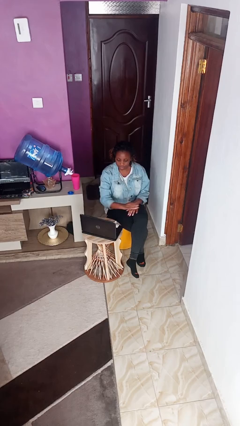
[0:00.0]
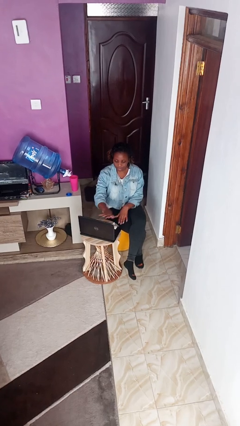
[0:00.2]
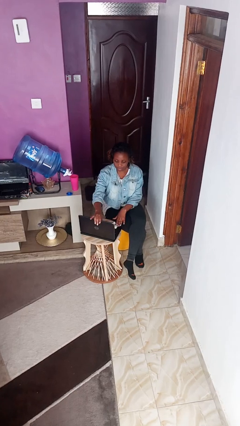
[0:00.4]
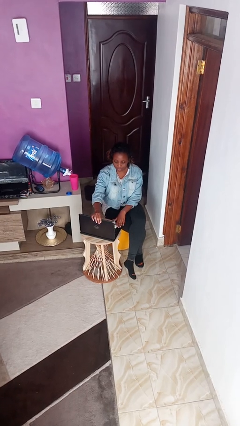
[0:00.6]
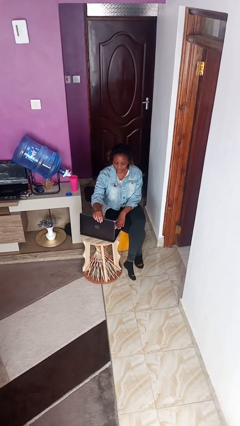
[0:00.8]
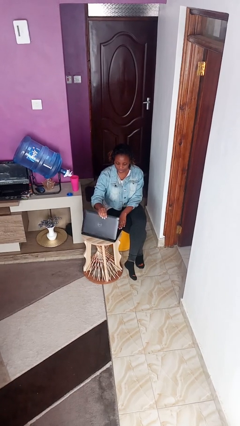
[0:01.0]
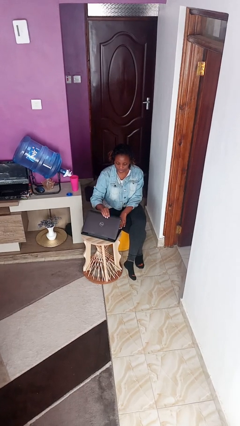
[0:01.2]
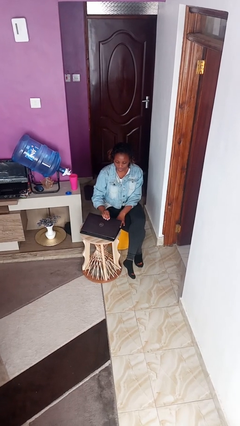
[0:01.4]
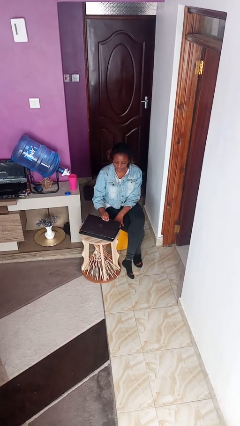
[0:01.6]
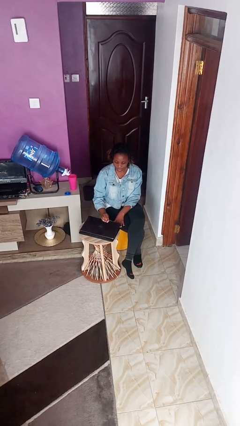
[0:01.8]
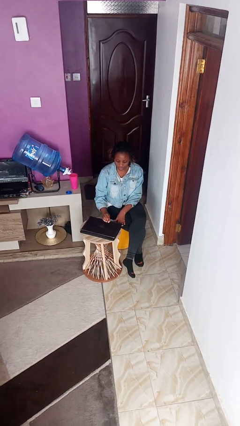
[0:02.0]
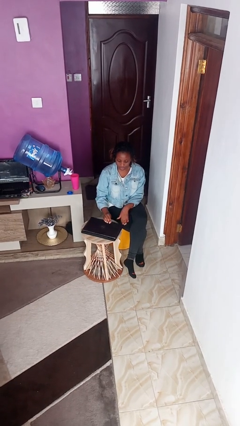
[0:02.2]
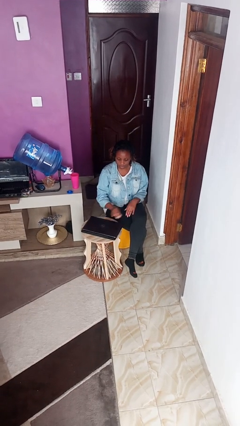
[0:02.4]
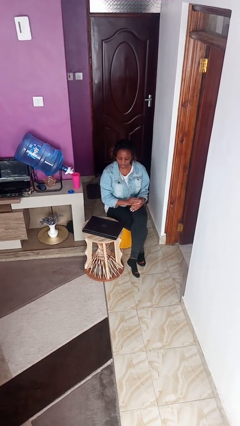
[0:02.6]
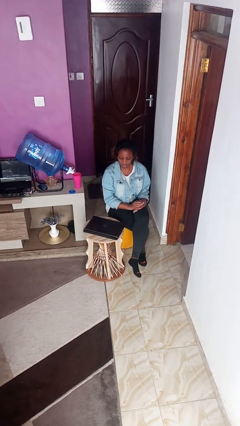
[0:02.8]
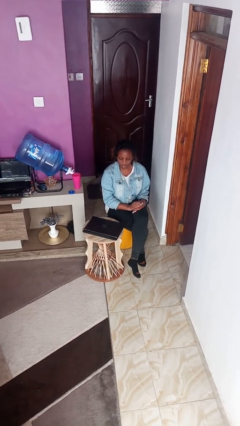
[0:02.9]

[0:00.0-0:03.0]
person closes laptop

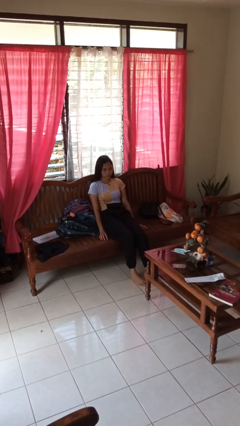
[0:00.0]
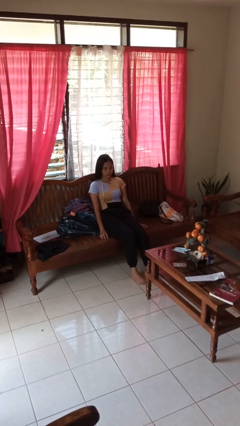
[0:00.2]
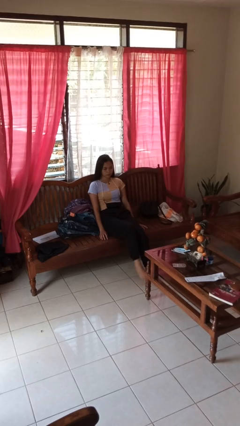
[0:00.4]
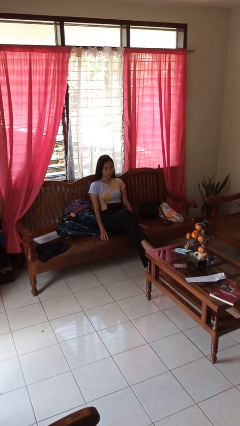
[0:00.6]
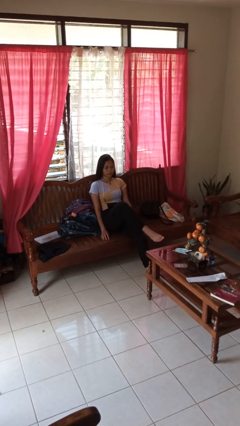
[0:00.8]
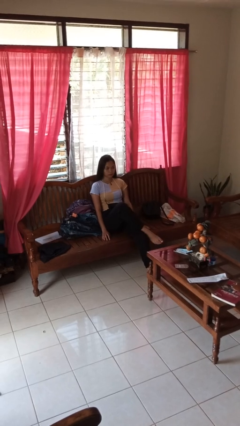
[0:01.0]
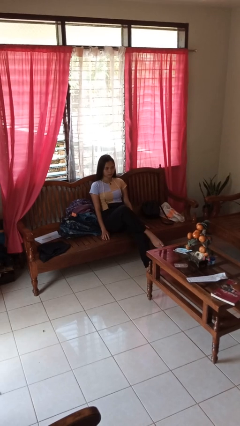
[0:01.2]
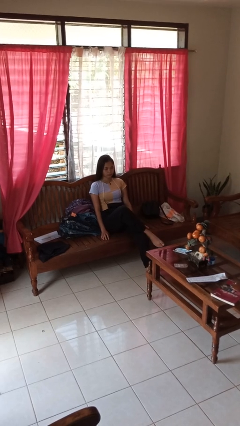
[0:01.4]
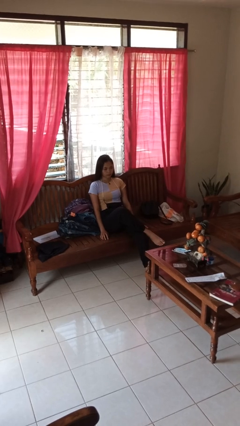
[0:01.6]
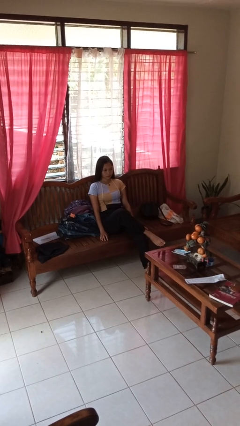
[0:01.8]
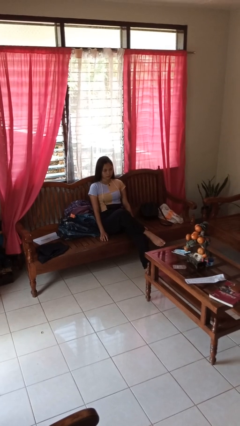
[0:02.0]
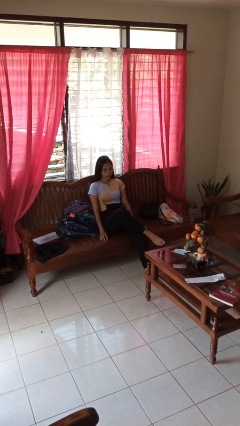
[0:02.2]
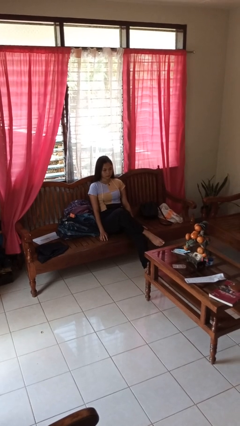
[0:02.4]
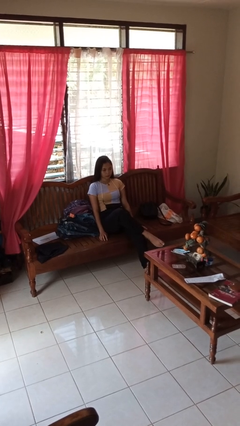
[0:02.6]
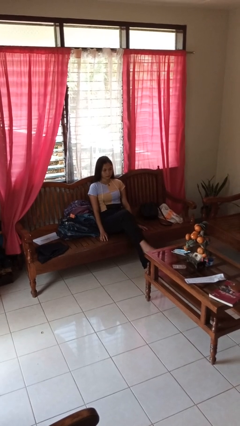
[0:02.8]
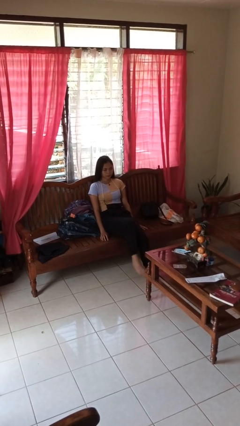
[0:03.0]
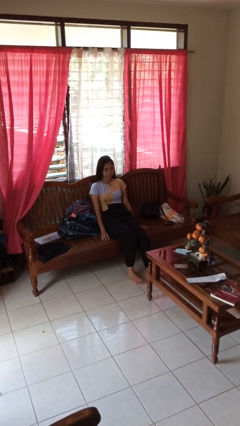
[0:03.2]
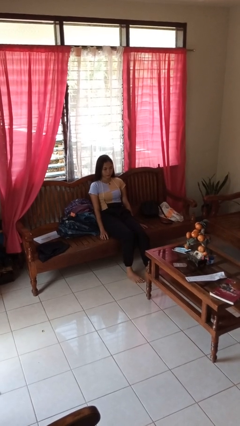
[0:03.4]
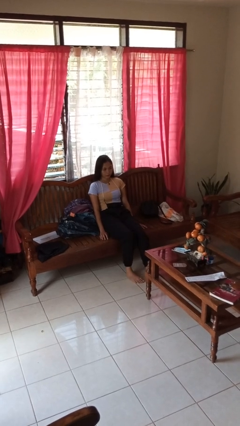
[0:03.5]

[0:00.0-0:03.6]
person crosses legs

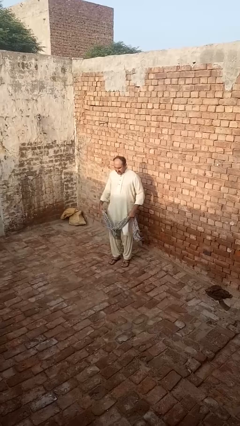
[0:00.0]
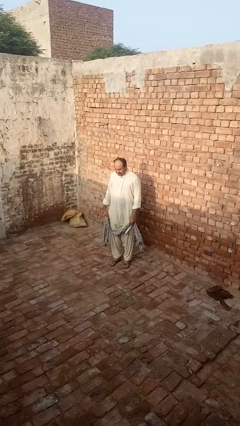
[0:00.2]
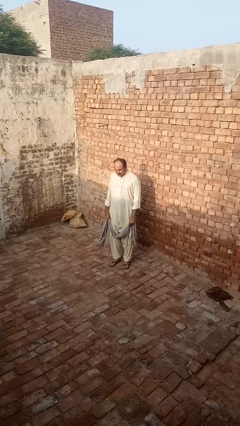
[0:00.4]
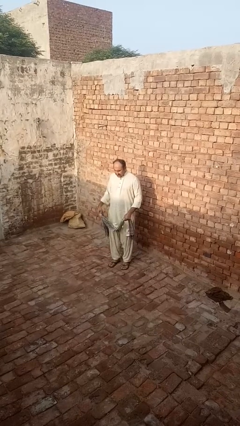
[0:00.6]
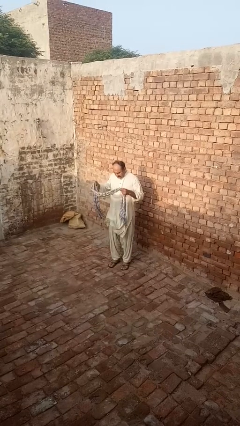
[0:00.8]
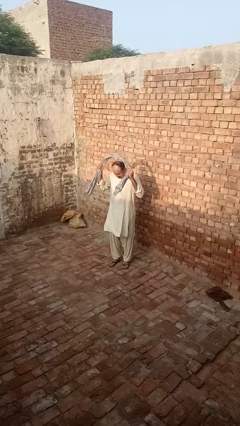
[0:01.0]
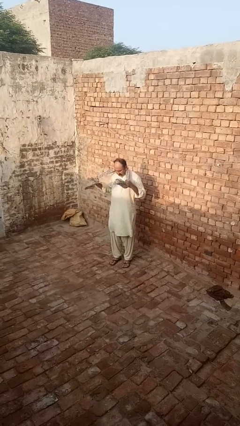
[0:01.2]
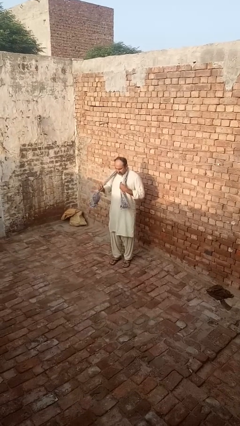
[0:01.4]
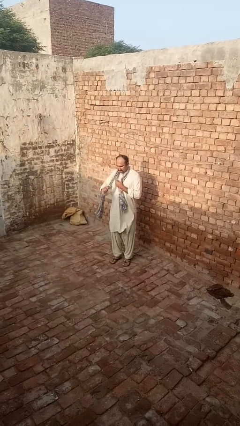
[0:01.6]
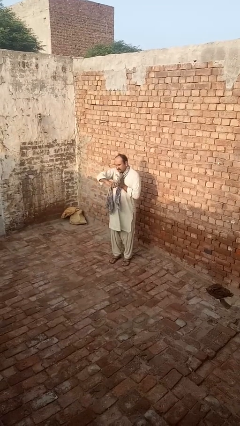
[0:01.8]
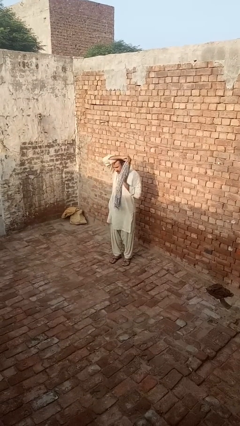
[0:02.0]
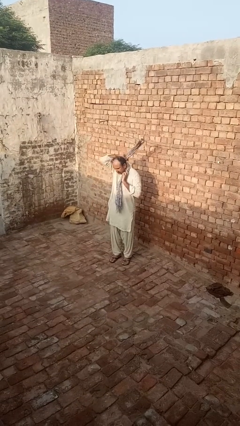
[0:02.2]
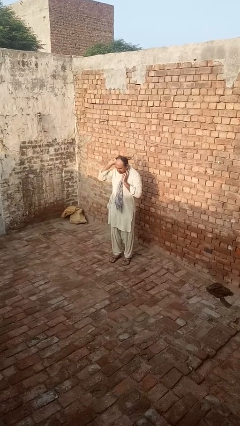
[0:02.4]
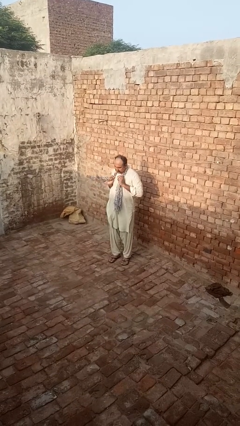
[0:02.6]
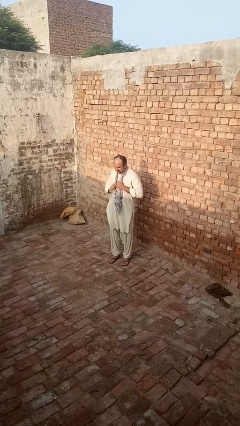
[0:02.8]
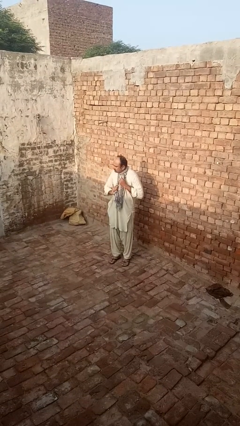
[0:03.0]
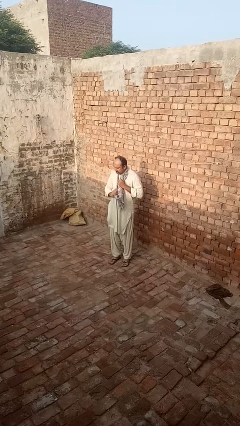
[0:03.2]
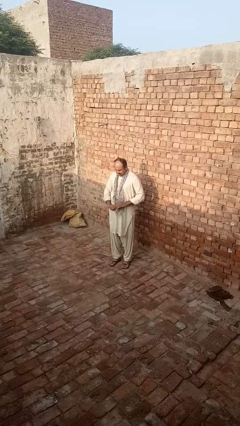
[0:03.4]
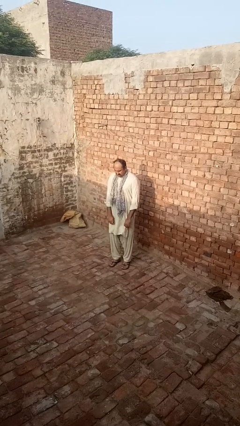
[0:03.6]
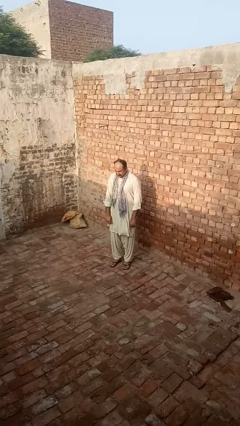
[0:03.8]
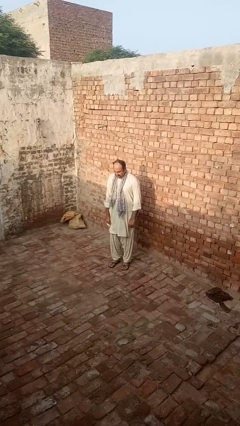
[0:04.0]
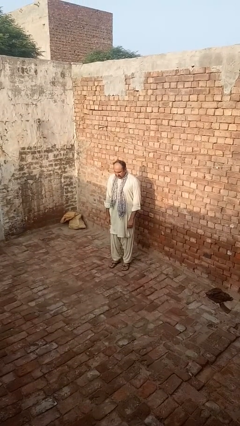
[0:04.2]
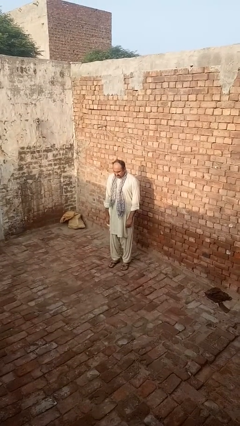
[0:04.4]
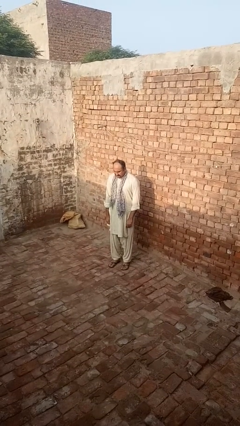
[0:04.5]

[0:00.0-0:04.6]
person puts on scarf

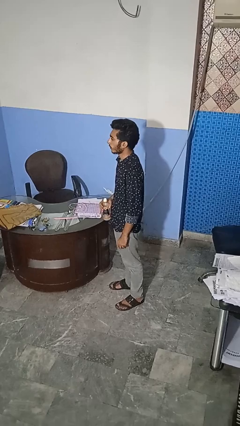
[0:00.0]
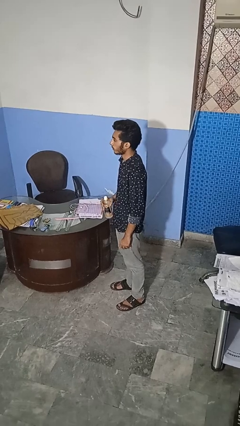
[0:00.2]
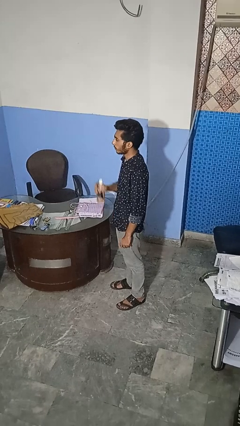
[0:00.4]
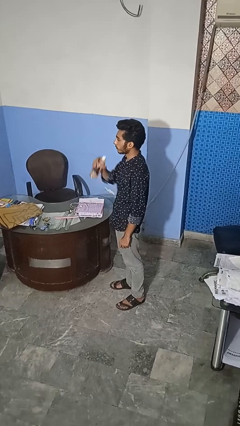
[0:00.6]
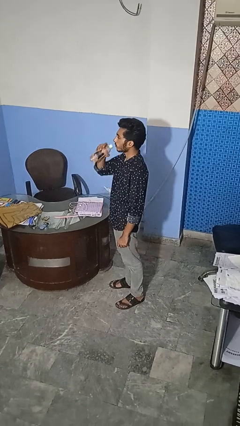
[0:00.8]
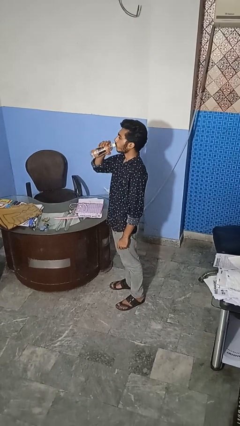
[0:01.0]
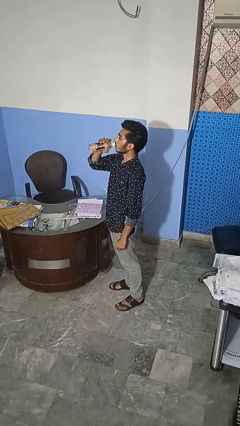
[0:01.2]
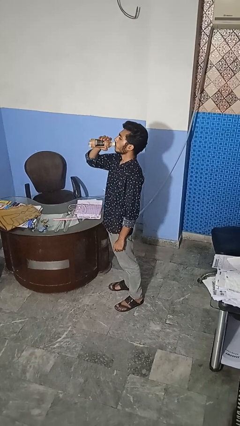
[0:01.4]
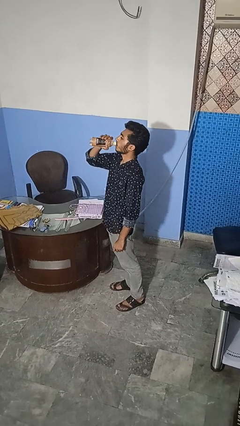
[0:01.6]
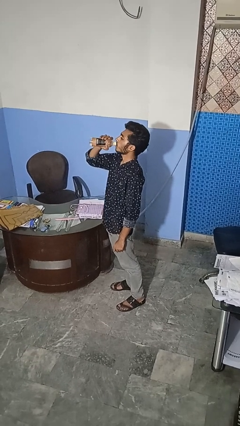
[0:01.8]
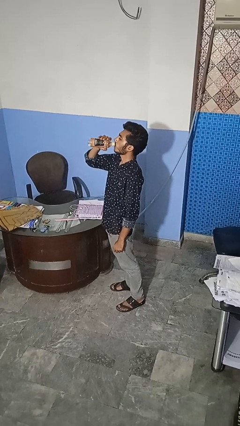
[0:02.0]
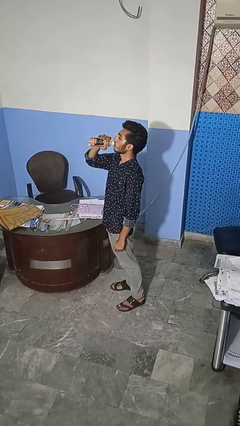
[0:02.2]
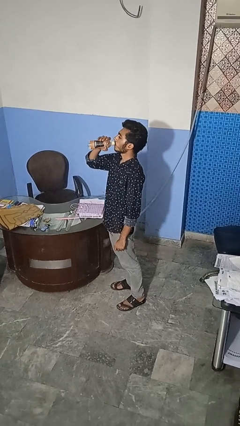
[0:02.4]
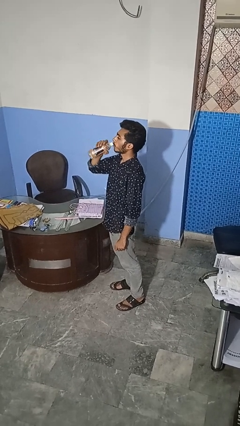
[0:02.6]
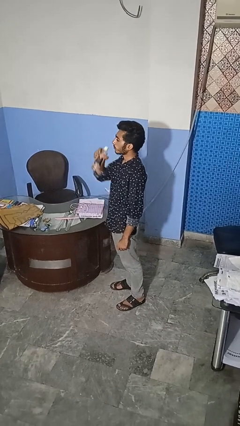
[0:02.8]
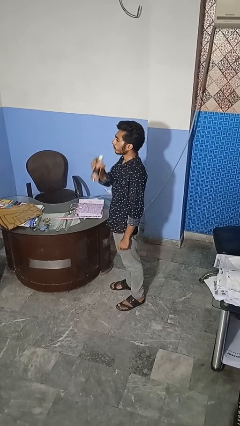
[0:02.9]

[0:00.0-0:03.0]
person drinks from bottle

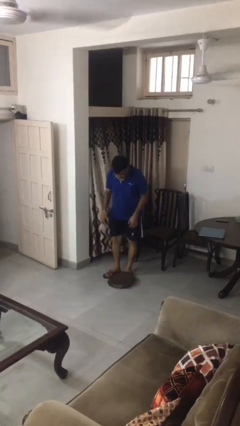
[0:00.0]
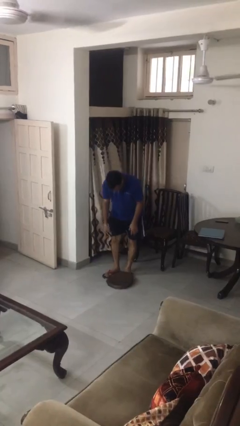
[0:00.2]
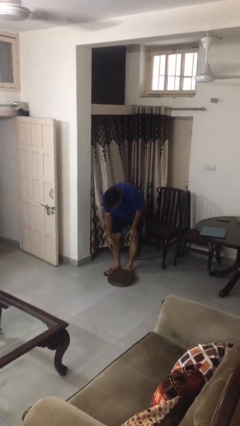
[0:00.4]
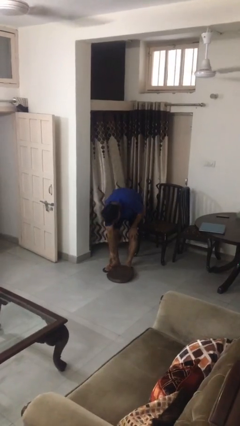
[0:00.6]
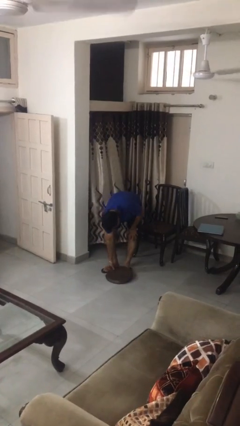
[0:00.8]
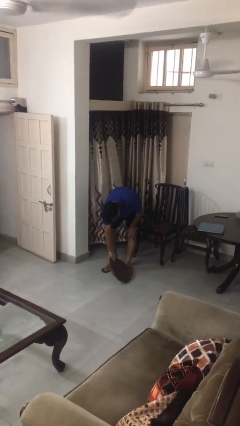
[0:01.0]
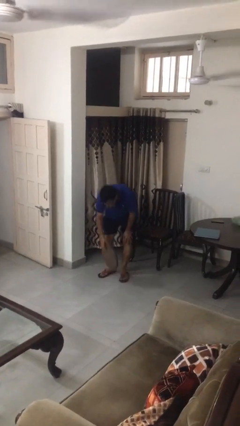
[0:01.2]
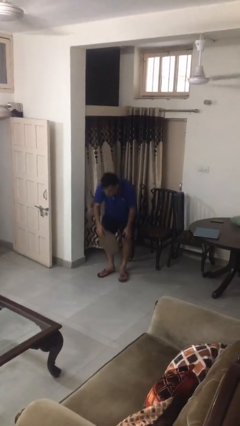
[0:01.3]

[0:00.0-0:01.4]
person picks up object from floor

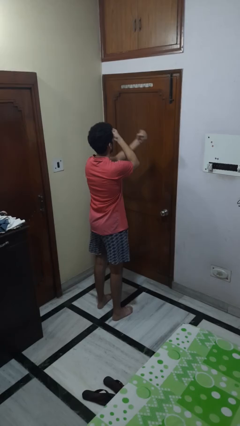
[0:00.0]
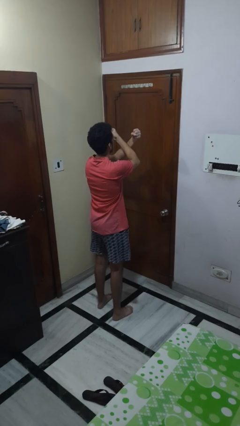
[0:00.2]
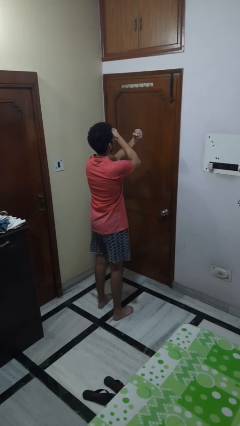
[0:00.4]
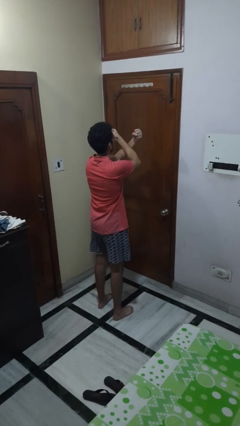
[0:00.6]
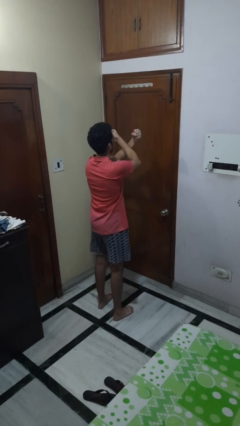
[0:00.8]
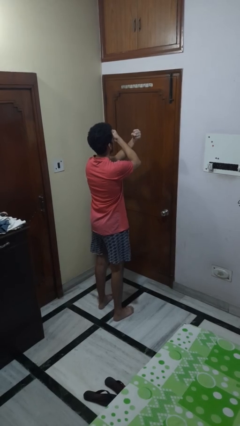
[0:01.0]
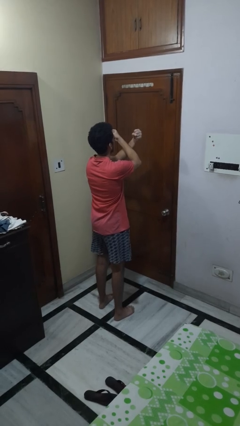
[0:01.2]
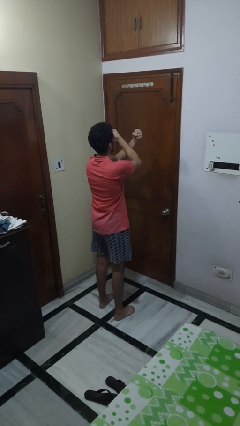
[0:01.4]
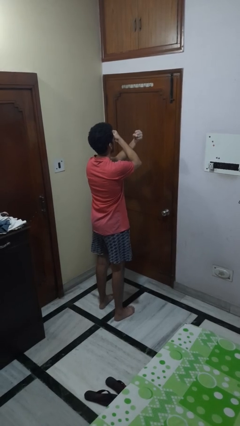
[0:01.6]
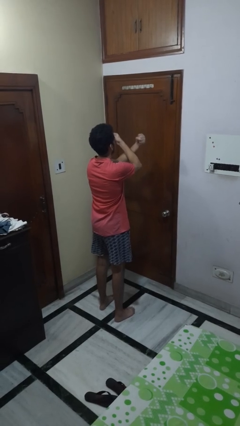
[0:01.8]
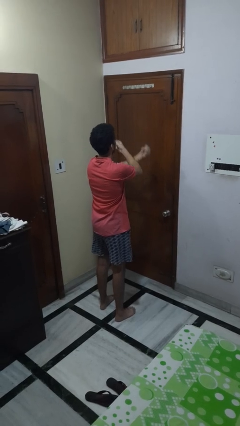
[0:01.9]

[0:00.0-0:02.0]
person gestures arms x
